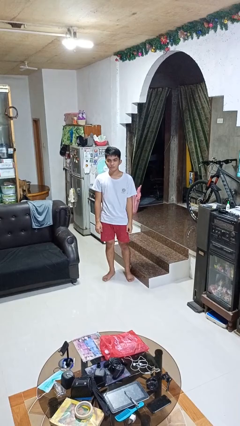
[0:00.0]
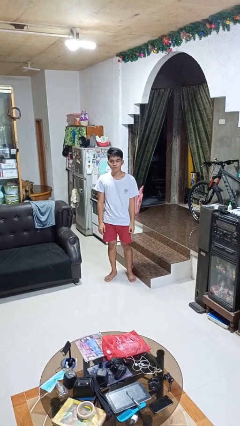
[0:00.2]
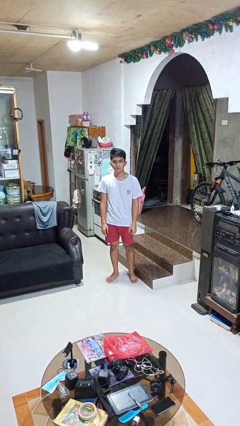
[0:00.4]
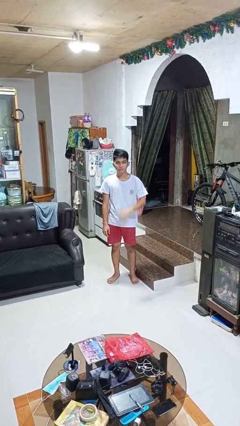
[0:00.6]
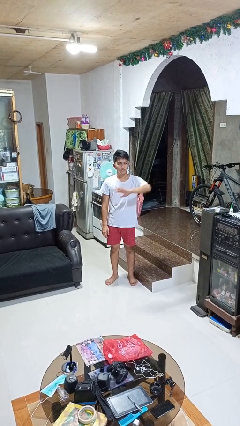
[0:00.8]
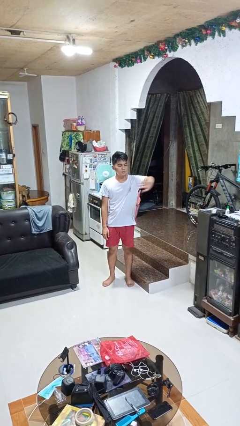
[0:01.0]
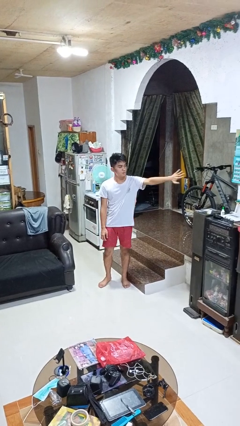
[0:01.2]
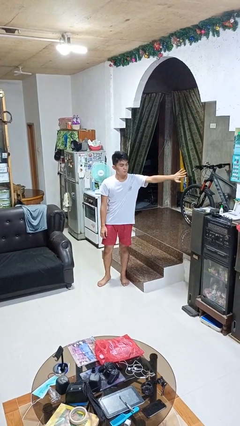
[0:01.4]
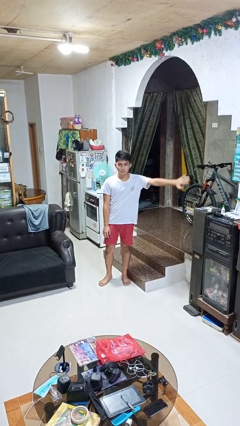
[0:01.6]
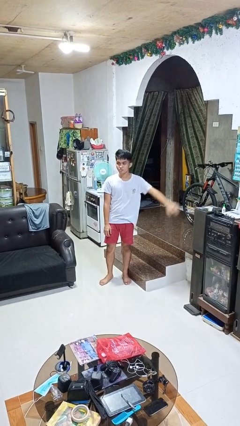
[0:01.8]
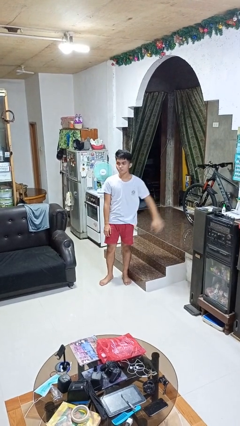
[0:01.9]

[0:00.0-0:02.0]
person gestures swipe left

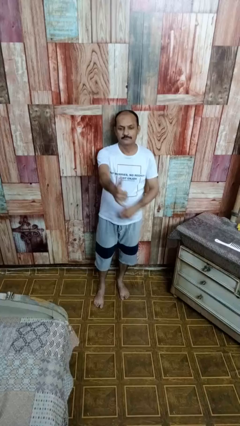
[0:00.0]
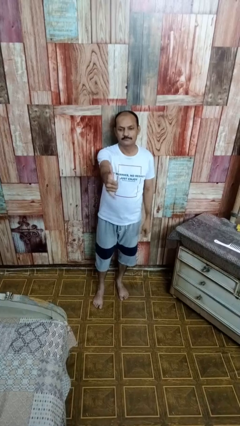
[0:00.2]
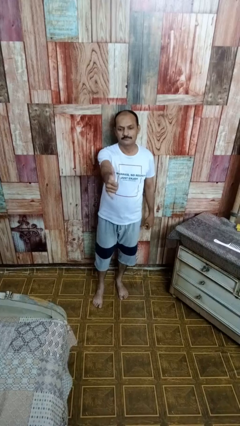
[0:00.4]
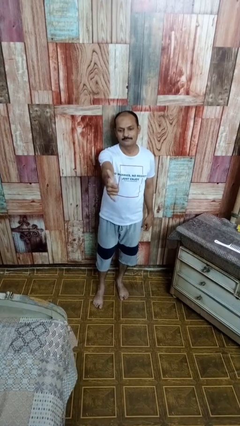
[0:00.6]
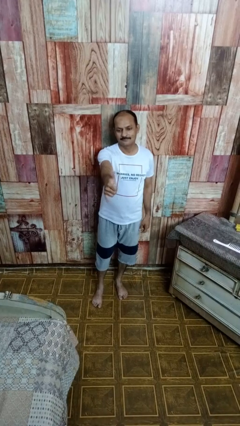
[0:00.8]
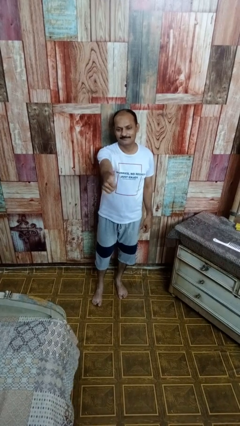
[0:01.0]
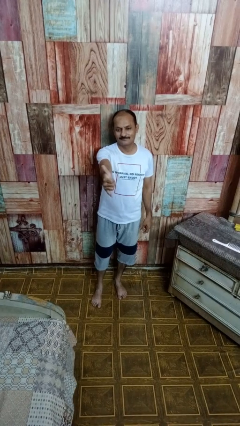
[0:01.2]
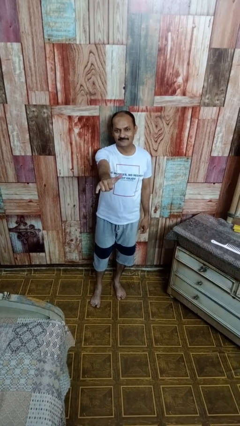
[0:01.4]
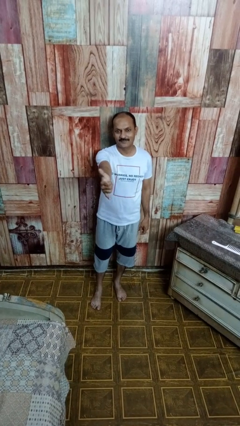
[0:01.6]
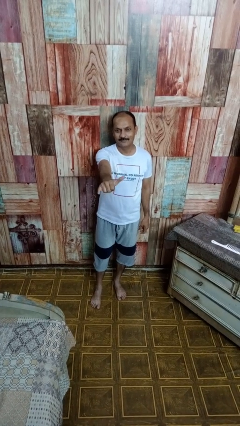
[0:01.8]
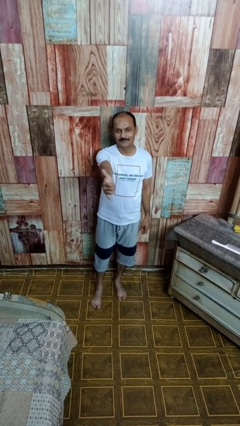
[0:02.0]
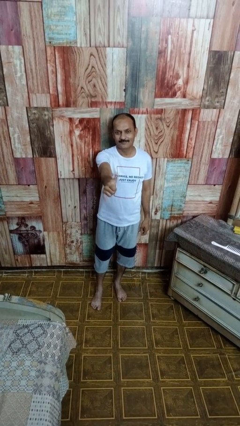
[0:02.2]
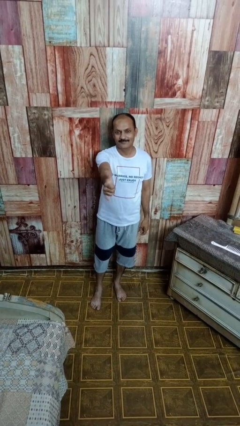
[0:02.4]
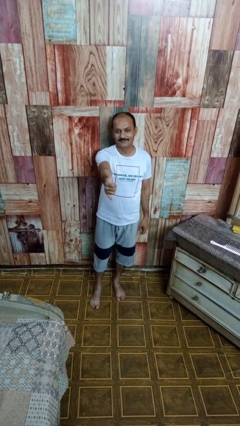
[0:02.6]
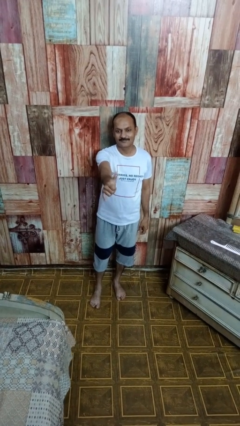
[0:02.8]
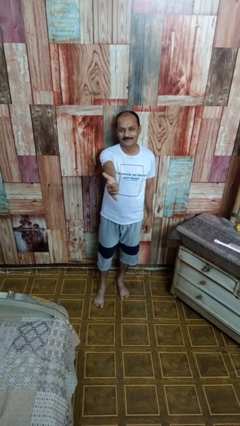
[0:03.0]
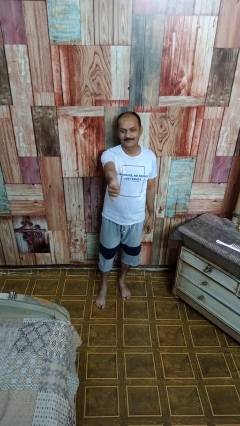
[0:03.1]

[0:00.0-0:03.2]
person gestures hang loose

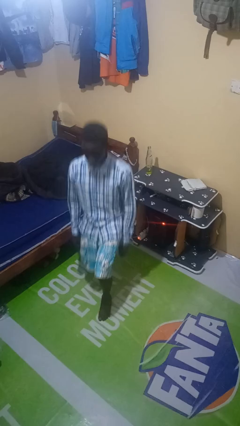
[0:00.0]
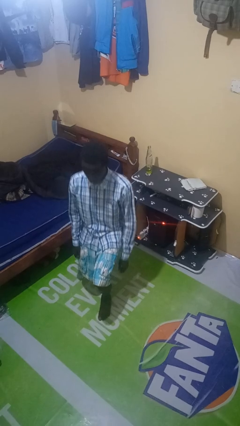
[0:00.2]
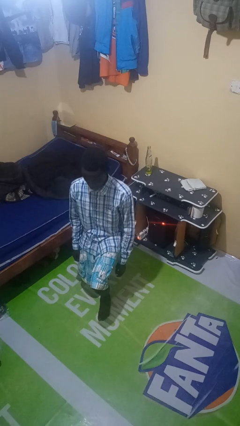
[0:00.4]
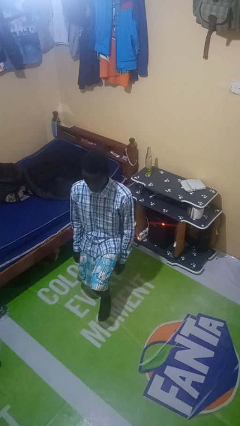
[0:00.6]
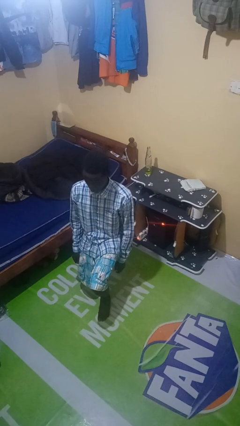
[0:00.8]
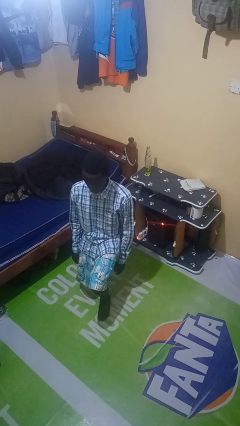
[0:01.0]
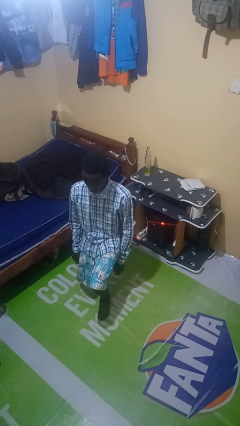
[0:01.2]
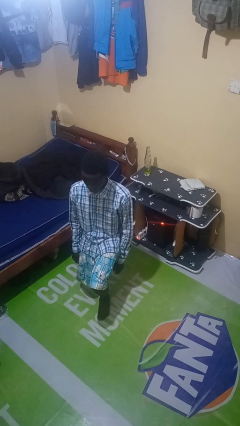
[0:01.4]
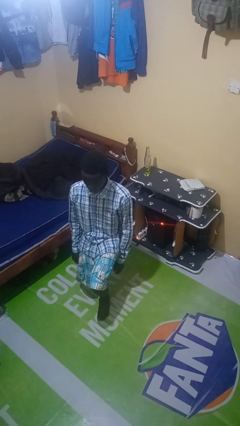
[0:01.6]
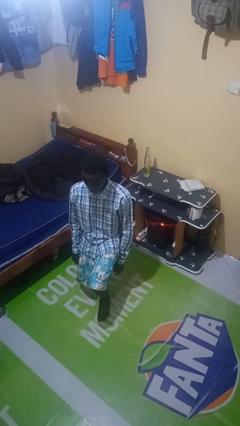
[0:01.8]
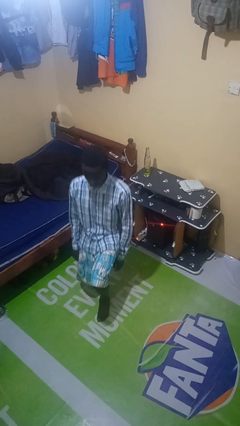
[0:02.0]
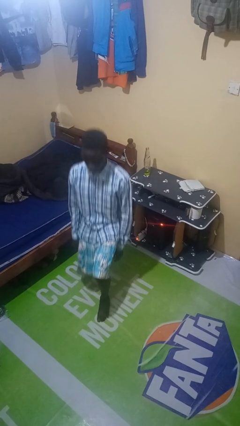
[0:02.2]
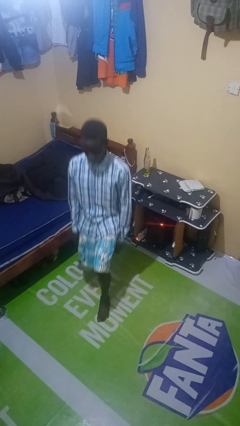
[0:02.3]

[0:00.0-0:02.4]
person exercises with lunges

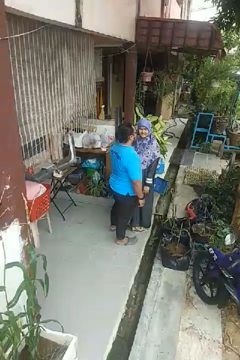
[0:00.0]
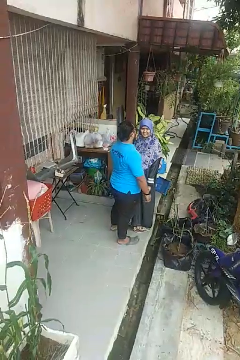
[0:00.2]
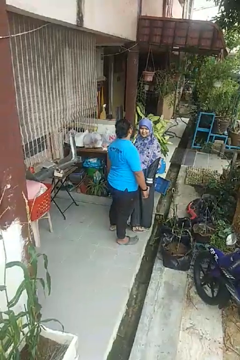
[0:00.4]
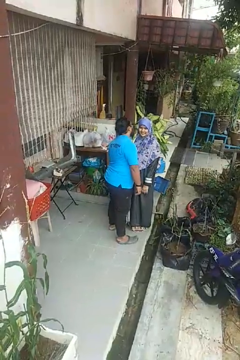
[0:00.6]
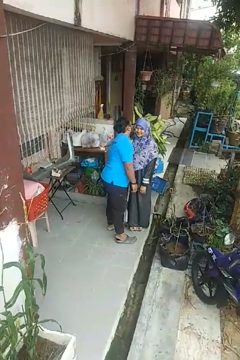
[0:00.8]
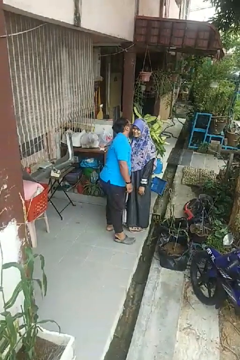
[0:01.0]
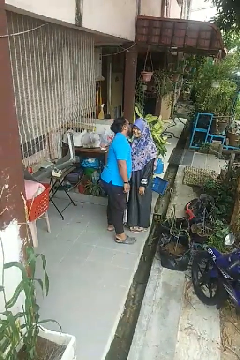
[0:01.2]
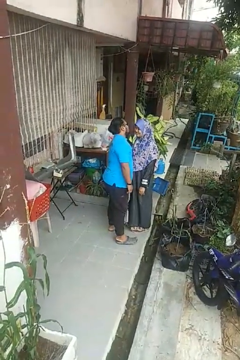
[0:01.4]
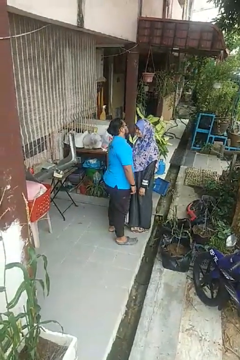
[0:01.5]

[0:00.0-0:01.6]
person kisses cheek of person

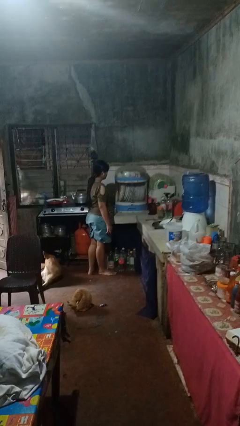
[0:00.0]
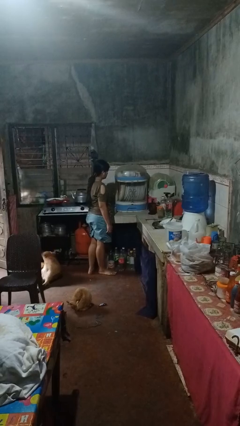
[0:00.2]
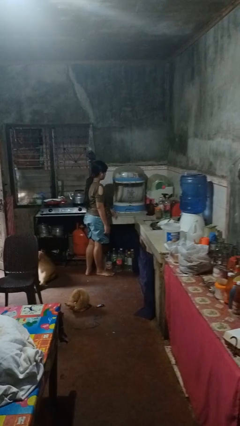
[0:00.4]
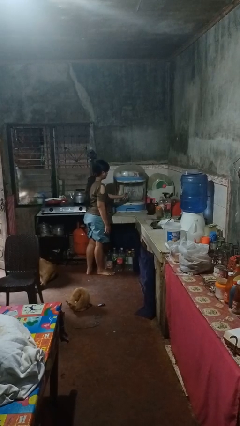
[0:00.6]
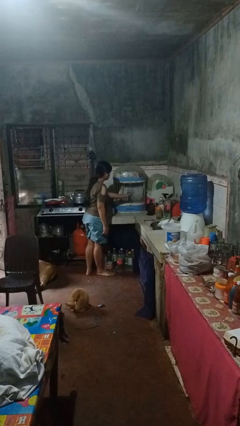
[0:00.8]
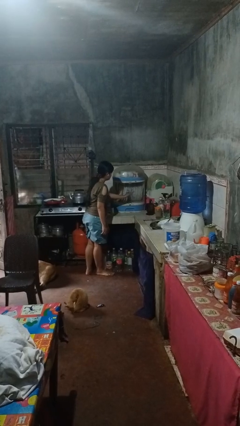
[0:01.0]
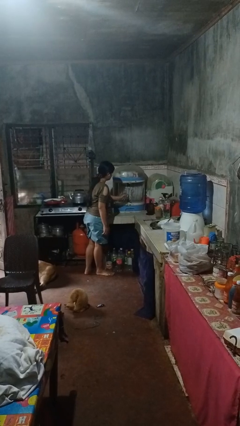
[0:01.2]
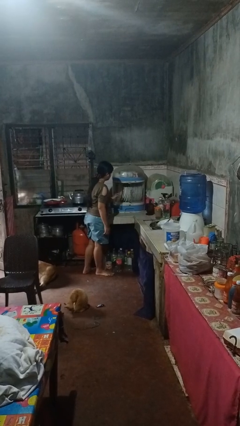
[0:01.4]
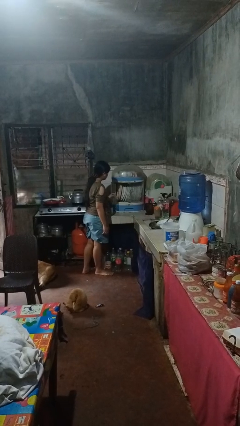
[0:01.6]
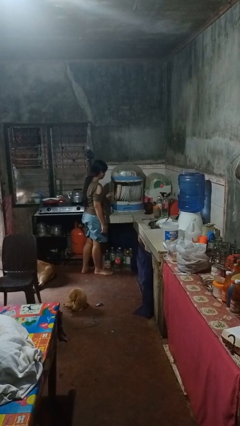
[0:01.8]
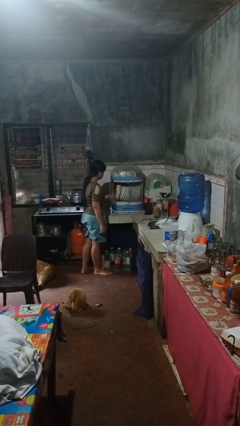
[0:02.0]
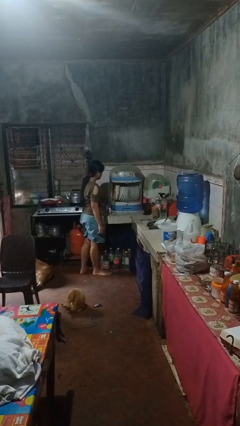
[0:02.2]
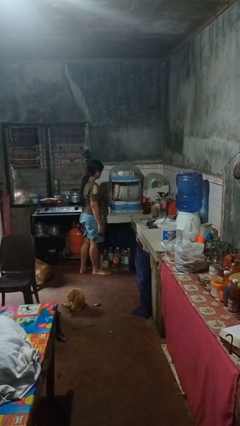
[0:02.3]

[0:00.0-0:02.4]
person opens kitchen drawer

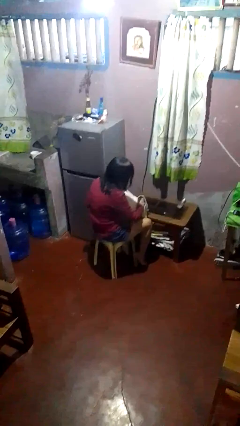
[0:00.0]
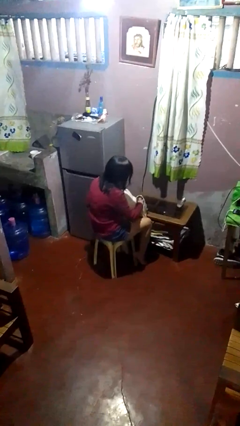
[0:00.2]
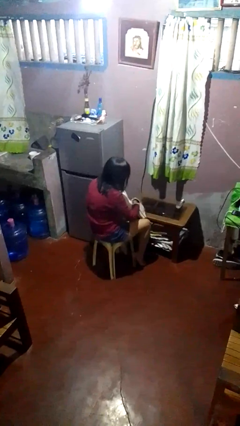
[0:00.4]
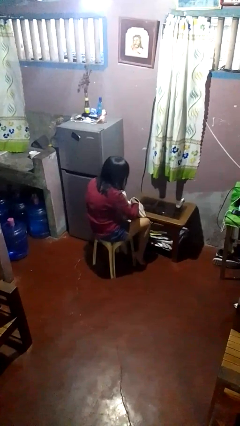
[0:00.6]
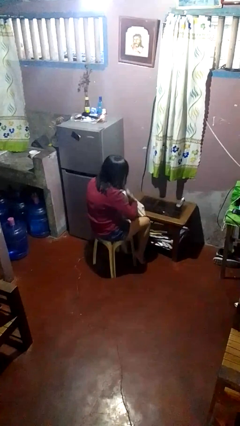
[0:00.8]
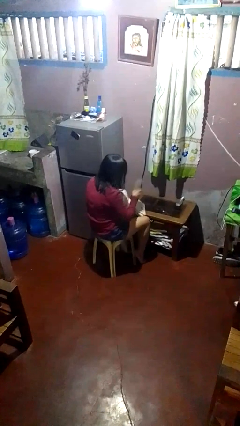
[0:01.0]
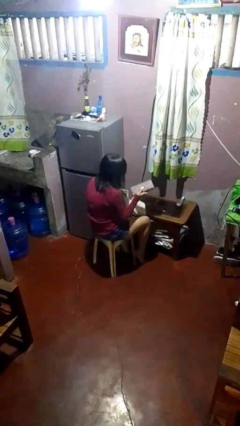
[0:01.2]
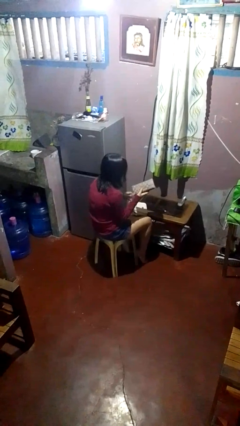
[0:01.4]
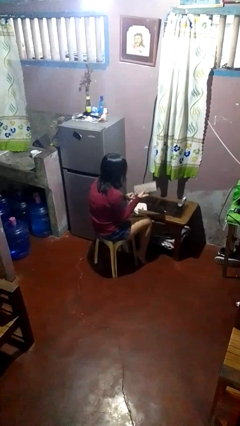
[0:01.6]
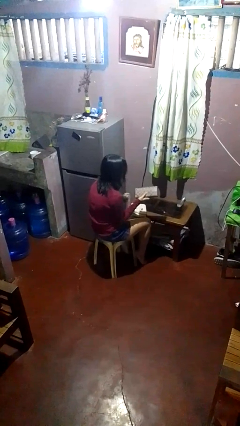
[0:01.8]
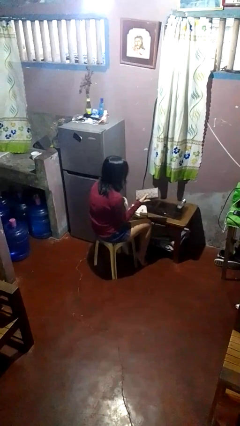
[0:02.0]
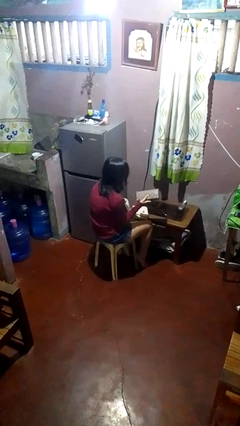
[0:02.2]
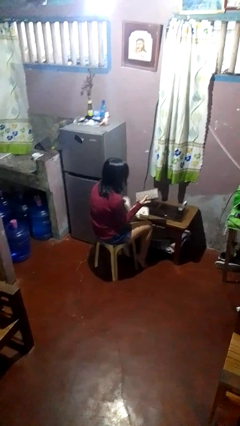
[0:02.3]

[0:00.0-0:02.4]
person takes object from purse

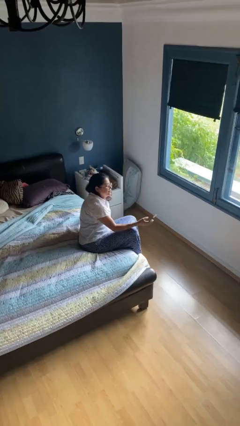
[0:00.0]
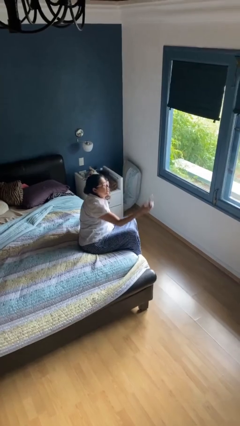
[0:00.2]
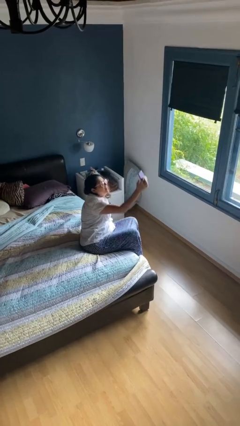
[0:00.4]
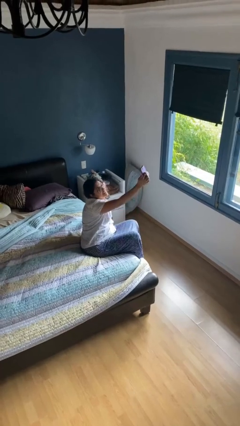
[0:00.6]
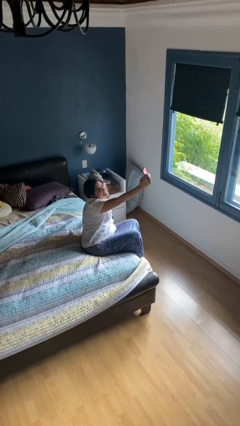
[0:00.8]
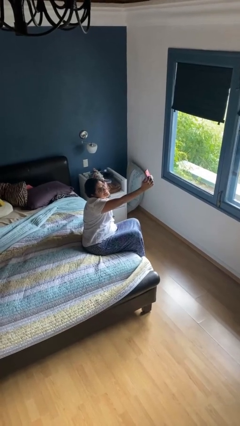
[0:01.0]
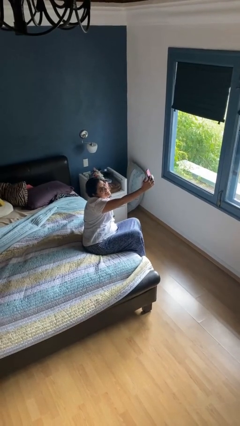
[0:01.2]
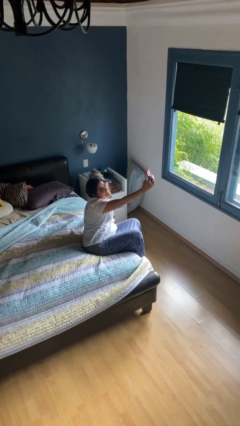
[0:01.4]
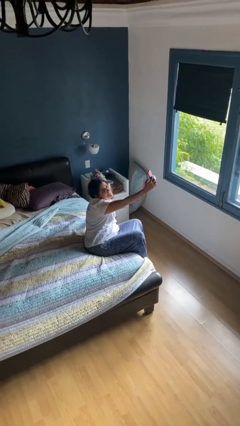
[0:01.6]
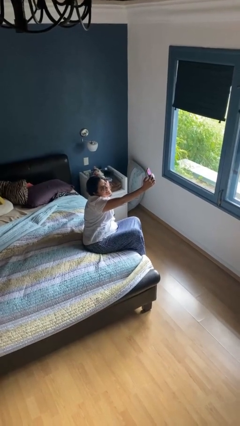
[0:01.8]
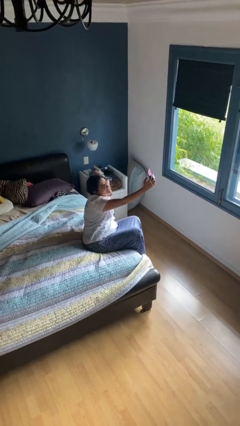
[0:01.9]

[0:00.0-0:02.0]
person takes selfie

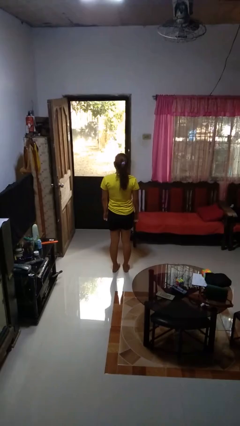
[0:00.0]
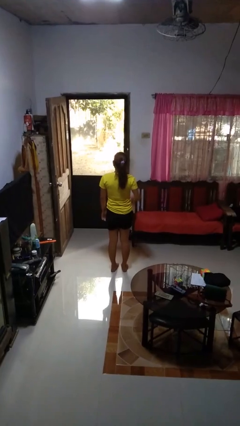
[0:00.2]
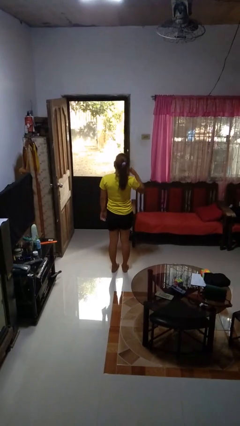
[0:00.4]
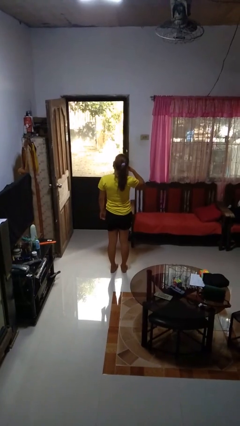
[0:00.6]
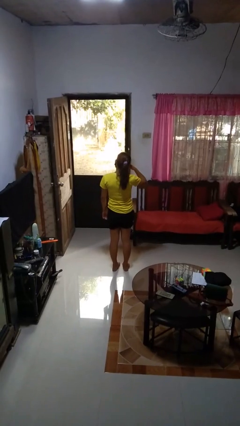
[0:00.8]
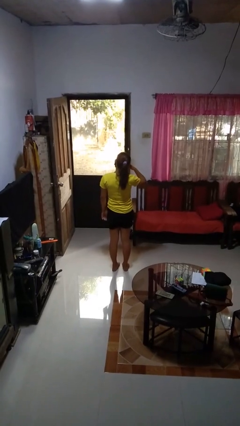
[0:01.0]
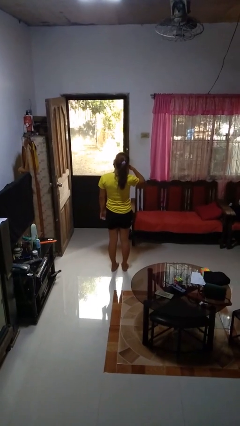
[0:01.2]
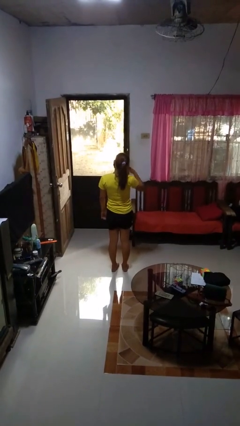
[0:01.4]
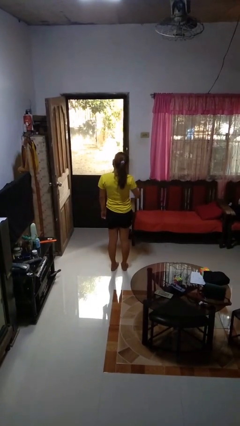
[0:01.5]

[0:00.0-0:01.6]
person gestures call me
